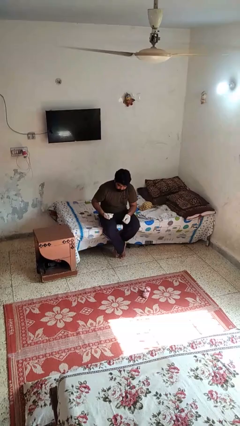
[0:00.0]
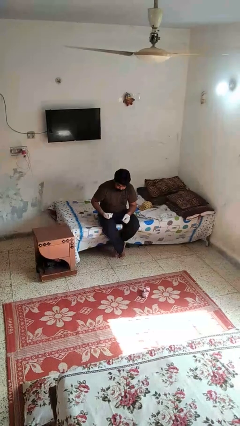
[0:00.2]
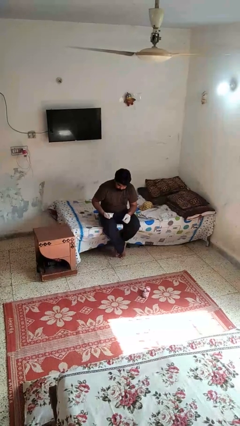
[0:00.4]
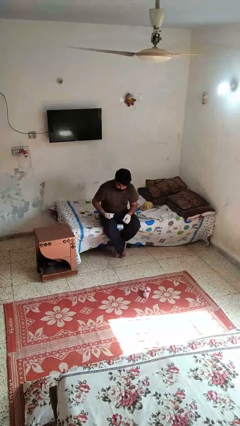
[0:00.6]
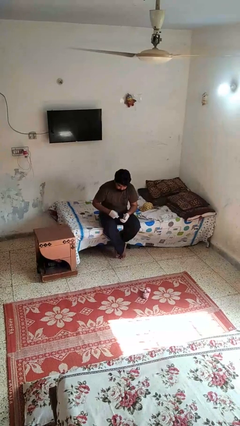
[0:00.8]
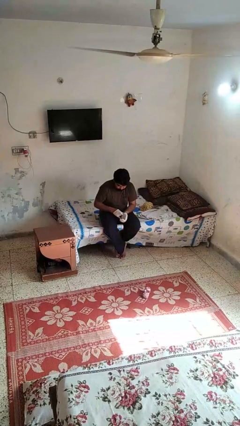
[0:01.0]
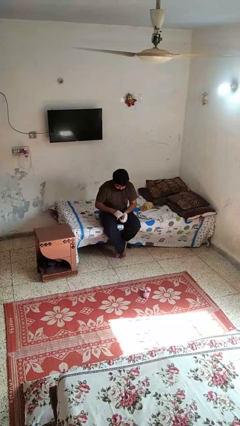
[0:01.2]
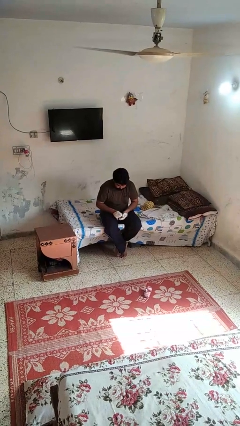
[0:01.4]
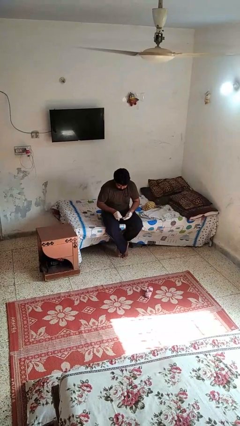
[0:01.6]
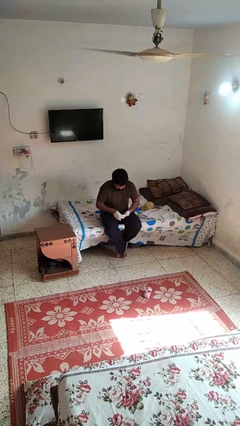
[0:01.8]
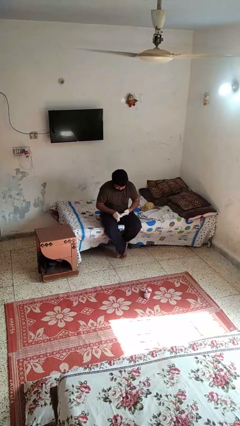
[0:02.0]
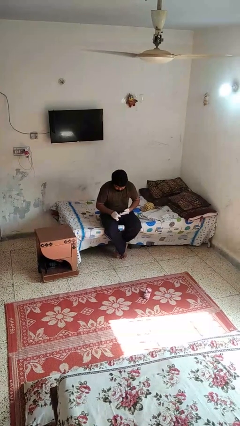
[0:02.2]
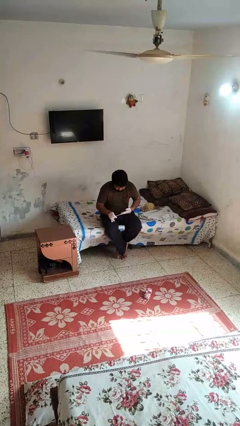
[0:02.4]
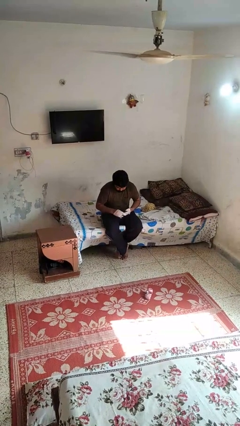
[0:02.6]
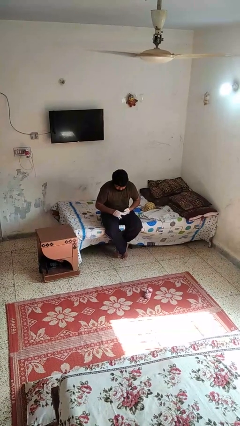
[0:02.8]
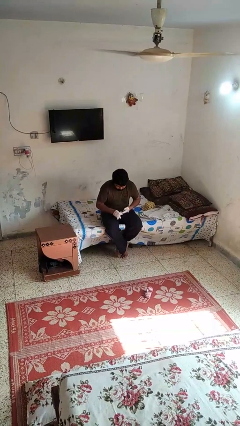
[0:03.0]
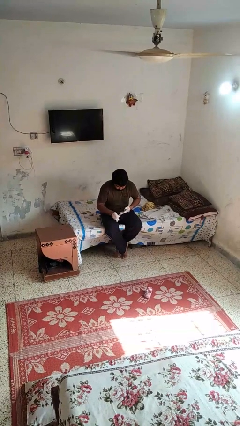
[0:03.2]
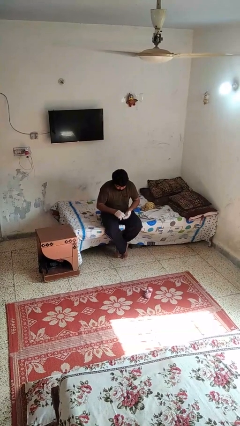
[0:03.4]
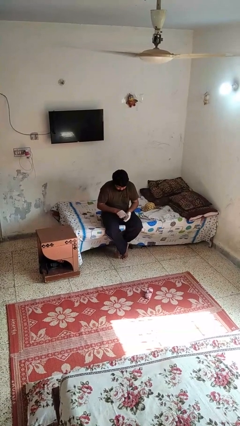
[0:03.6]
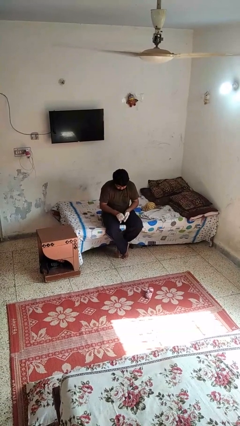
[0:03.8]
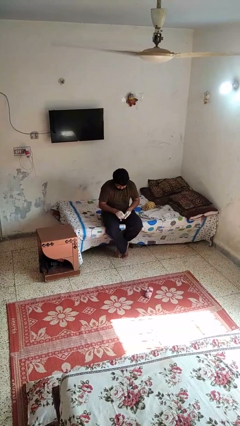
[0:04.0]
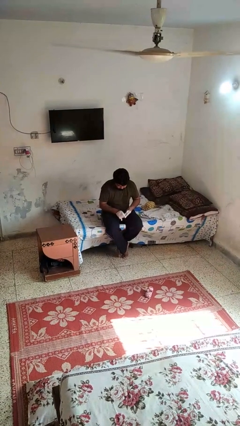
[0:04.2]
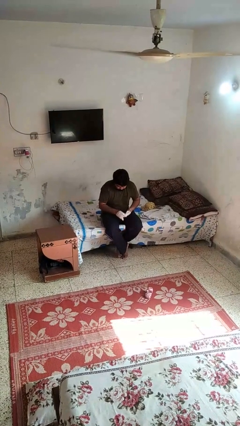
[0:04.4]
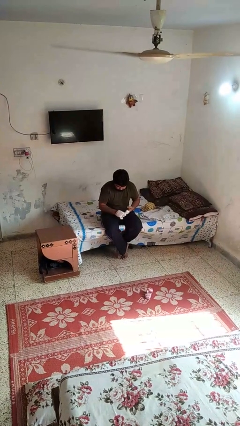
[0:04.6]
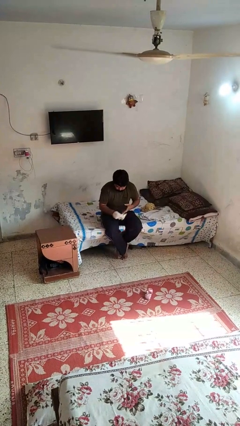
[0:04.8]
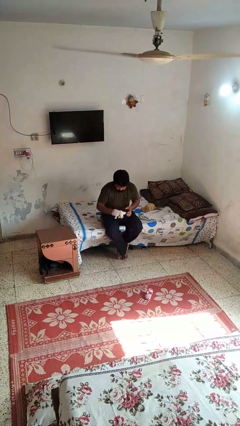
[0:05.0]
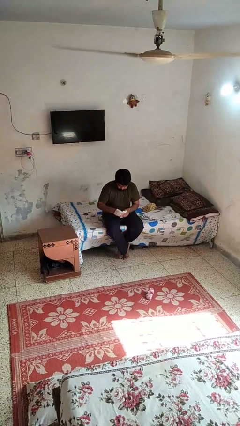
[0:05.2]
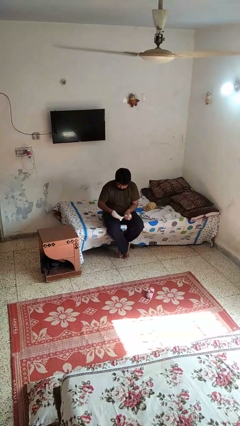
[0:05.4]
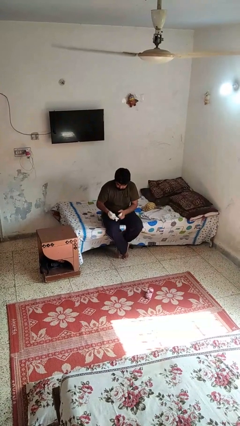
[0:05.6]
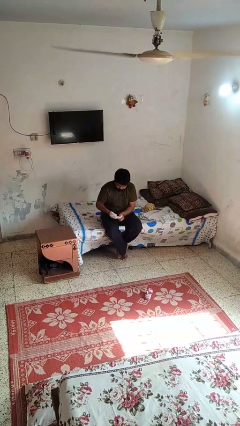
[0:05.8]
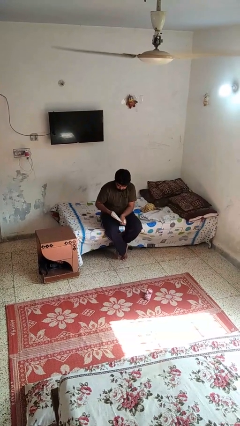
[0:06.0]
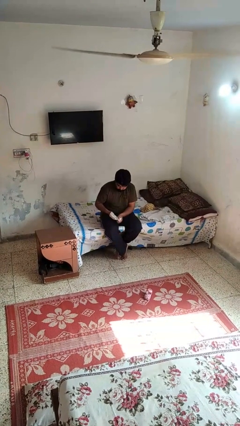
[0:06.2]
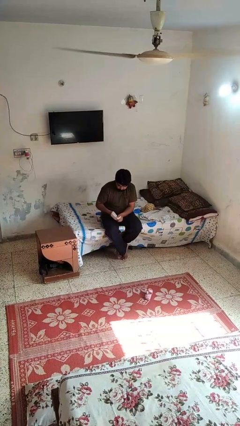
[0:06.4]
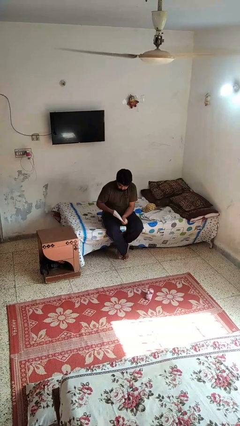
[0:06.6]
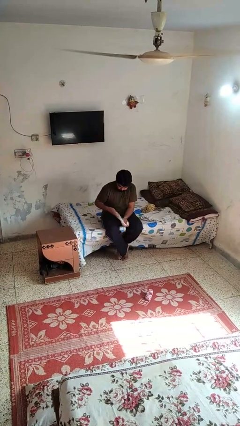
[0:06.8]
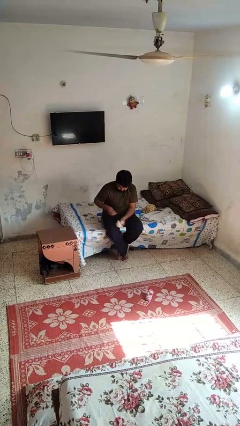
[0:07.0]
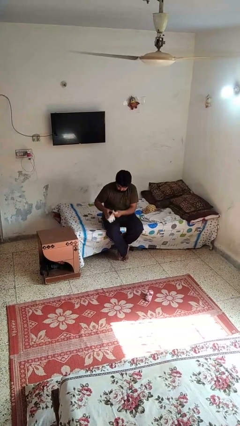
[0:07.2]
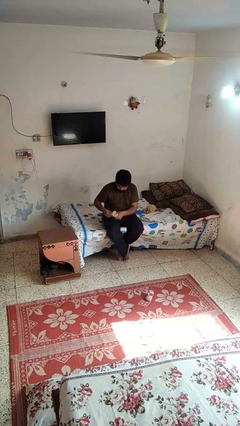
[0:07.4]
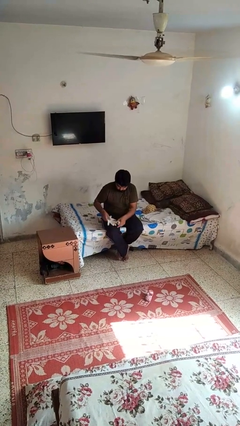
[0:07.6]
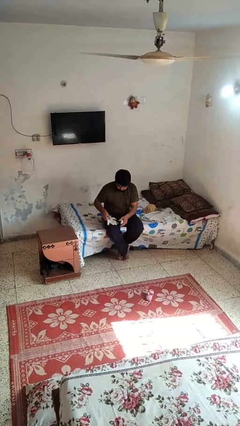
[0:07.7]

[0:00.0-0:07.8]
person takes off gloves

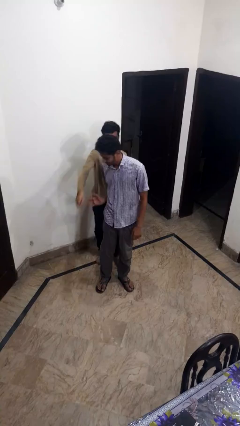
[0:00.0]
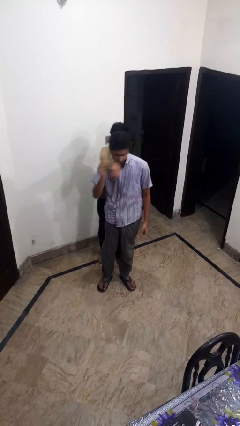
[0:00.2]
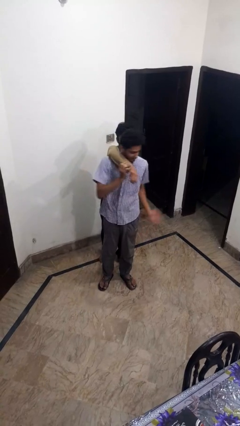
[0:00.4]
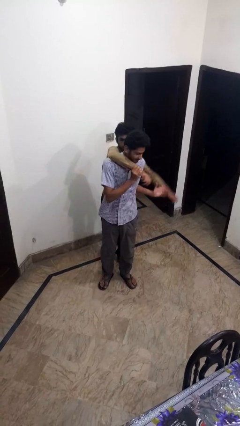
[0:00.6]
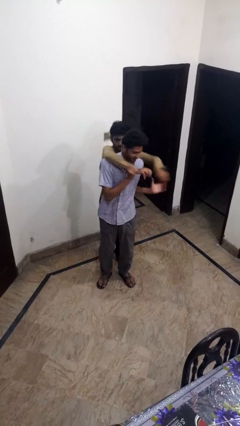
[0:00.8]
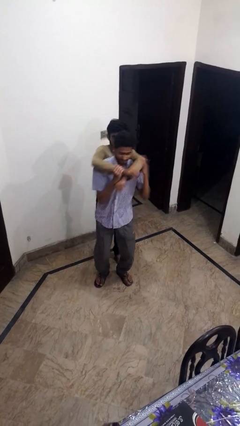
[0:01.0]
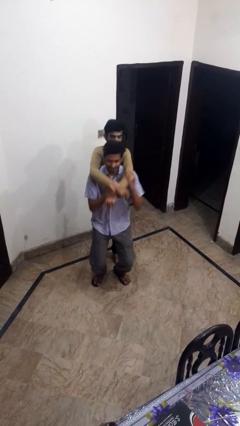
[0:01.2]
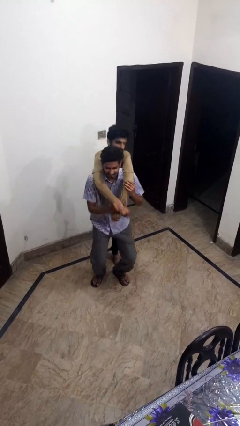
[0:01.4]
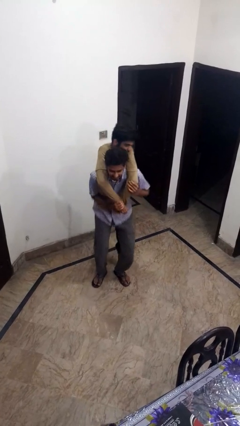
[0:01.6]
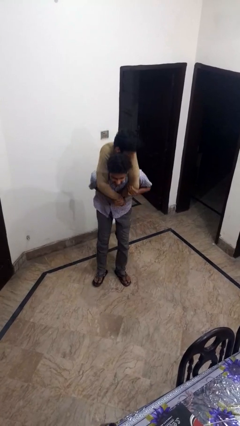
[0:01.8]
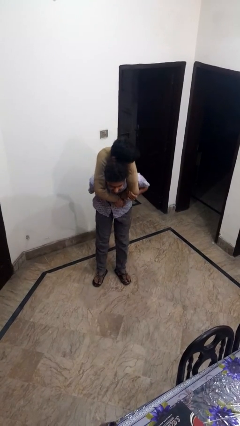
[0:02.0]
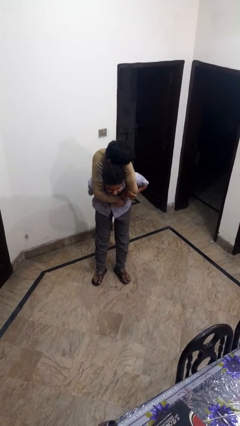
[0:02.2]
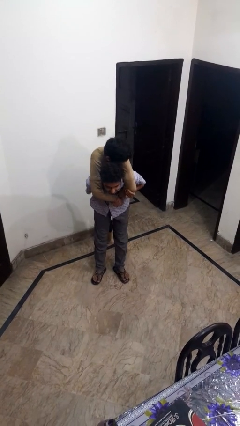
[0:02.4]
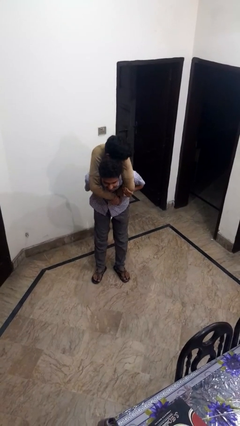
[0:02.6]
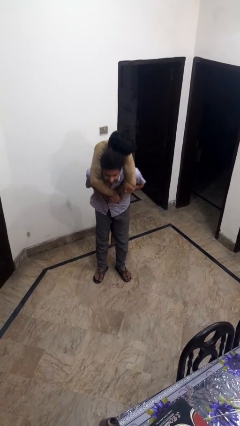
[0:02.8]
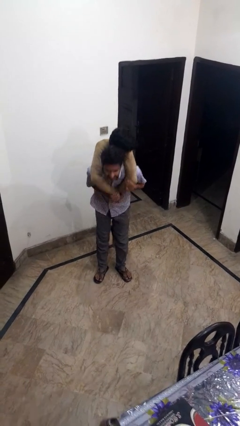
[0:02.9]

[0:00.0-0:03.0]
person carries person over shoulder

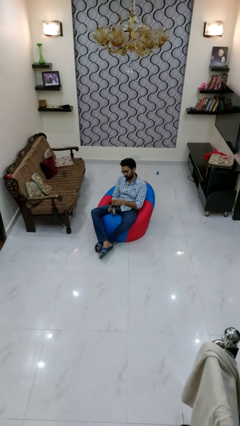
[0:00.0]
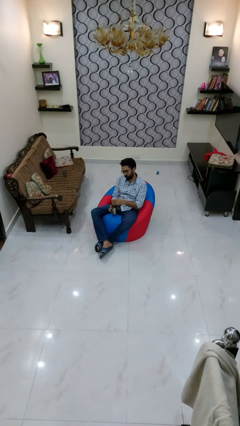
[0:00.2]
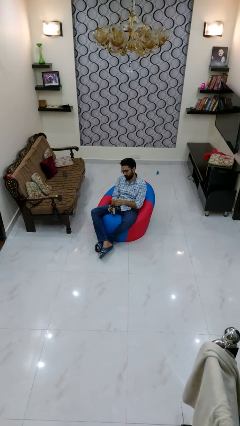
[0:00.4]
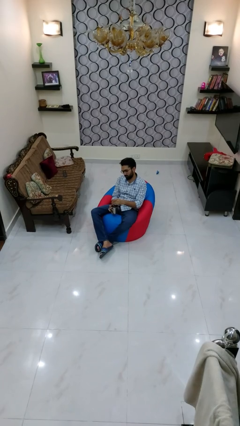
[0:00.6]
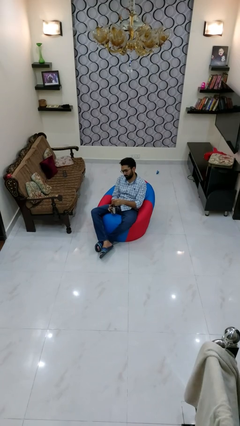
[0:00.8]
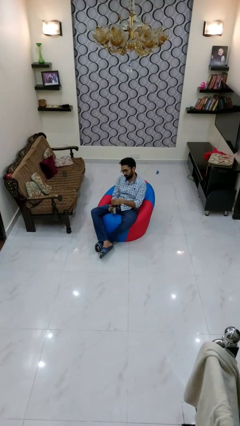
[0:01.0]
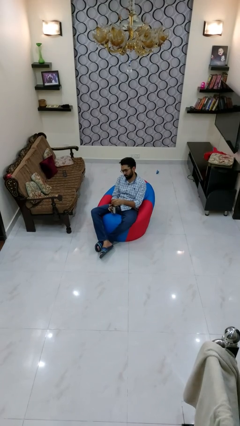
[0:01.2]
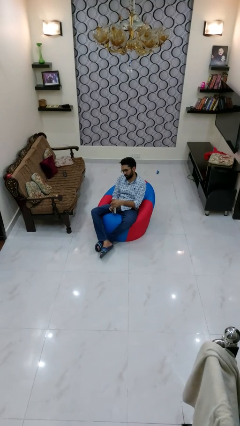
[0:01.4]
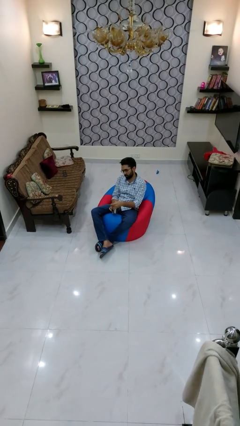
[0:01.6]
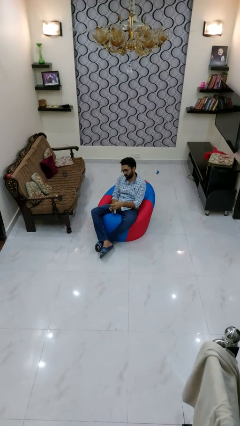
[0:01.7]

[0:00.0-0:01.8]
person stirs mug

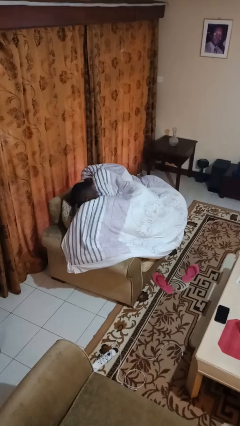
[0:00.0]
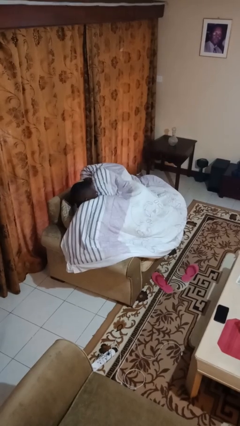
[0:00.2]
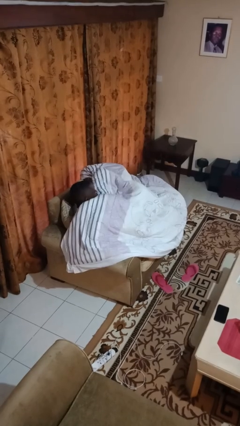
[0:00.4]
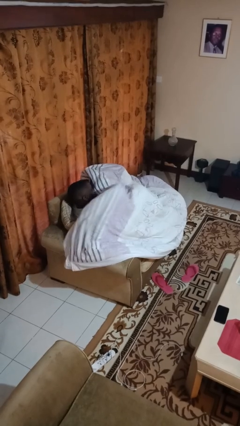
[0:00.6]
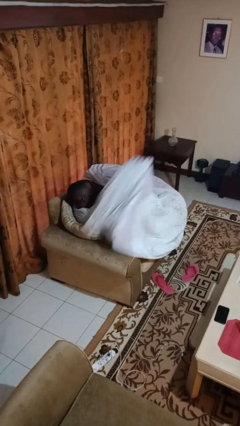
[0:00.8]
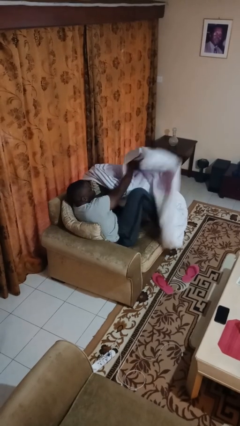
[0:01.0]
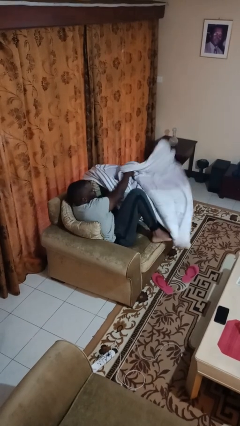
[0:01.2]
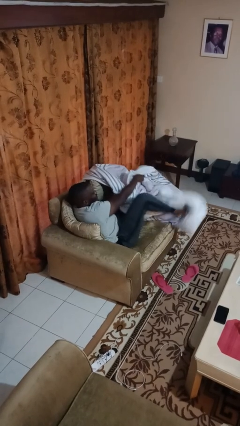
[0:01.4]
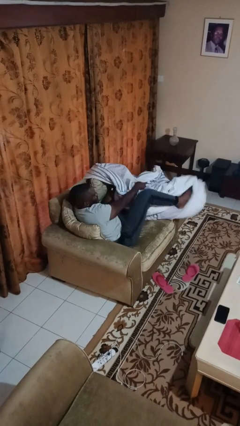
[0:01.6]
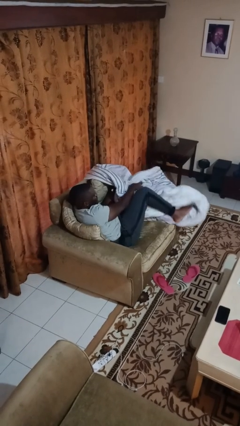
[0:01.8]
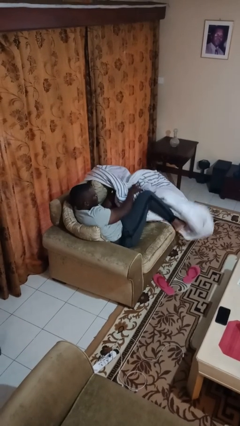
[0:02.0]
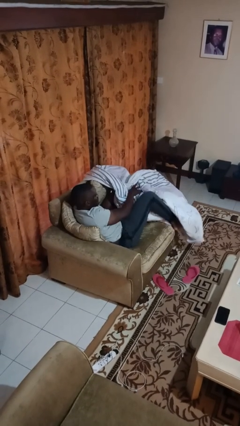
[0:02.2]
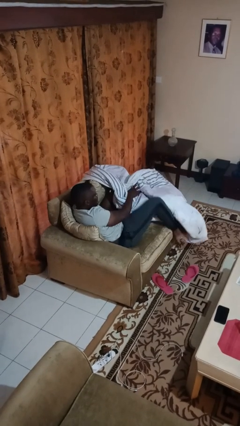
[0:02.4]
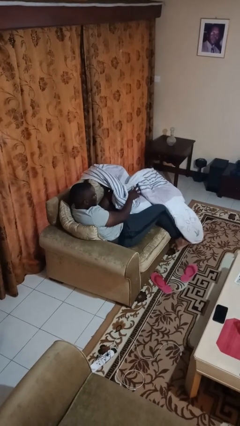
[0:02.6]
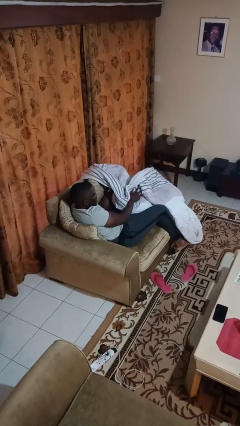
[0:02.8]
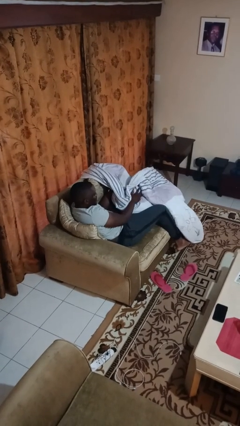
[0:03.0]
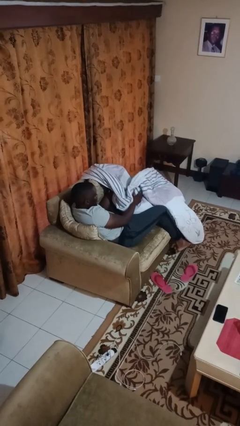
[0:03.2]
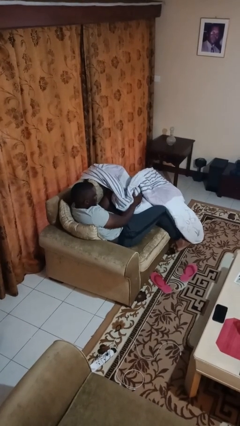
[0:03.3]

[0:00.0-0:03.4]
person uncovers with blanket

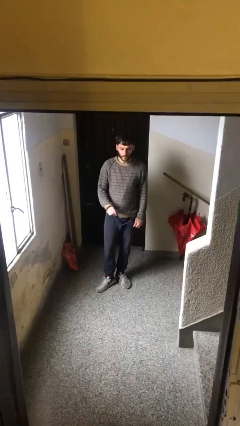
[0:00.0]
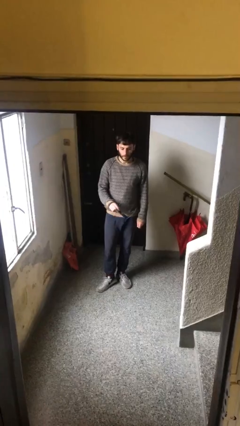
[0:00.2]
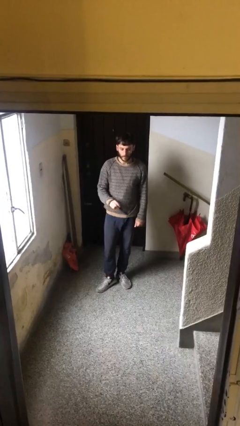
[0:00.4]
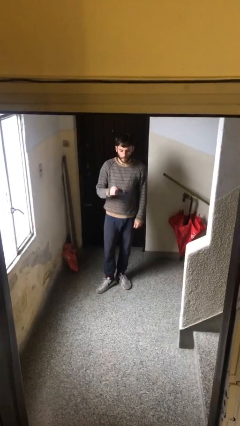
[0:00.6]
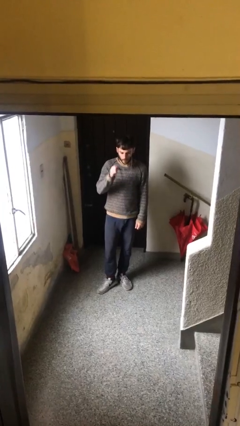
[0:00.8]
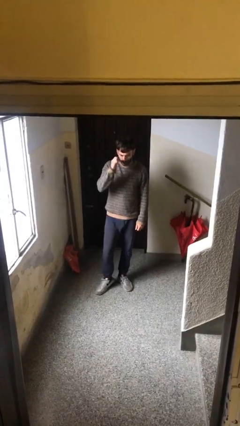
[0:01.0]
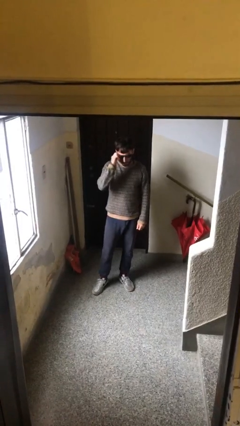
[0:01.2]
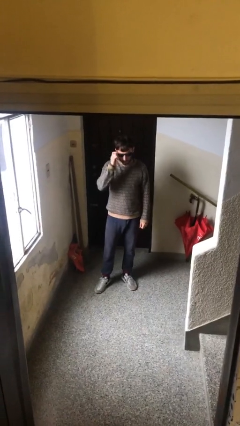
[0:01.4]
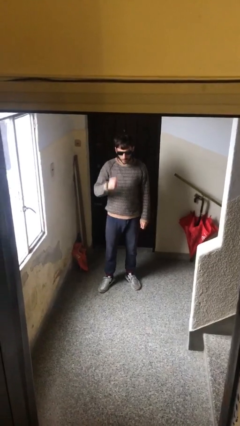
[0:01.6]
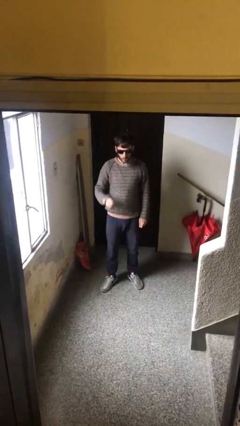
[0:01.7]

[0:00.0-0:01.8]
person puts on sunglasses
